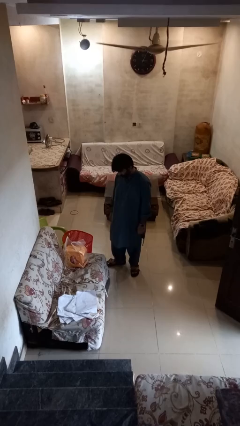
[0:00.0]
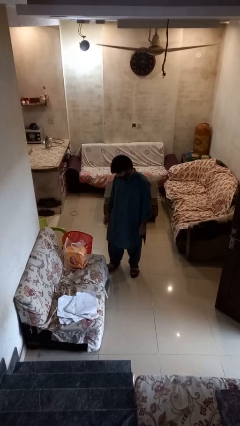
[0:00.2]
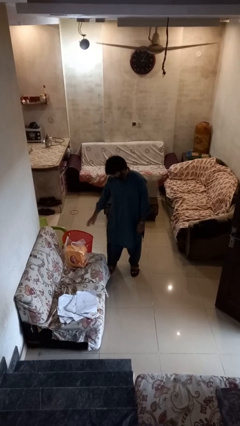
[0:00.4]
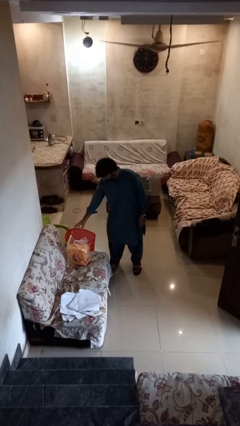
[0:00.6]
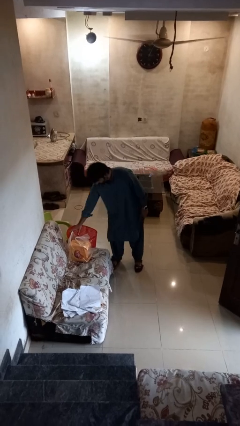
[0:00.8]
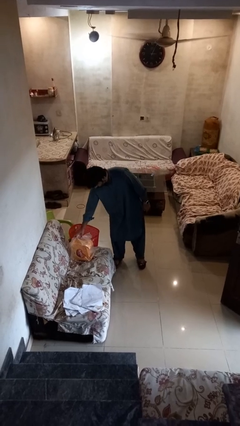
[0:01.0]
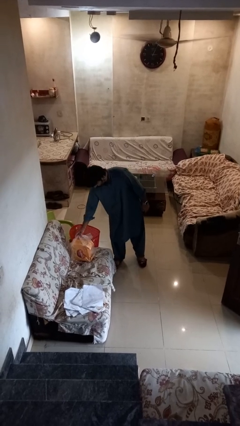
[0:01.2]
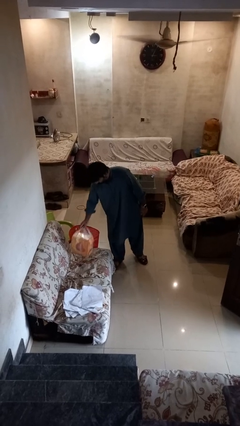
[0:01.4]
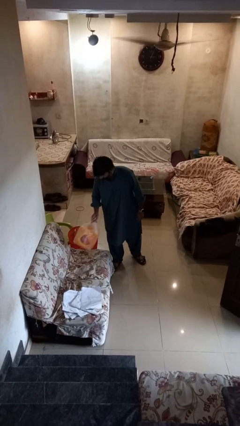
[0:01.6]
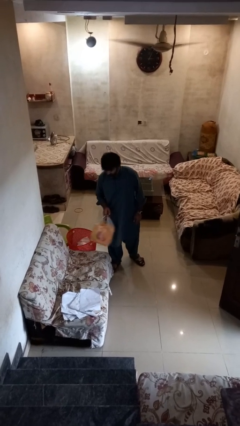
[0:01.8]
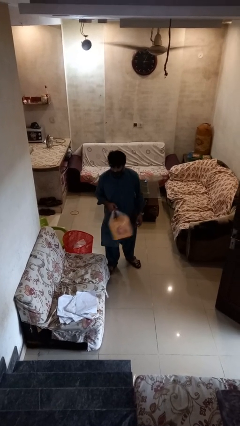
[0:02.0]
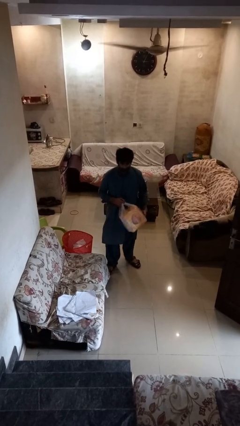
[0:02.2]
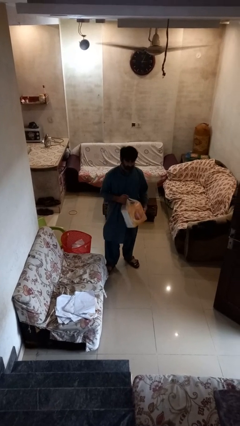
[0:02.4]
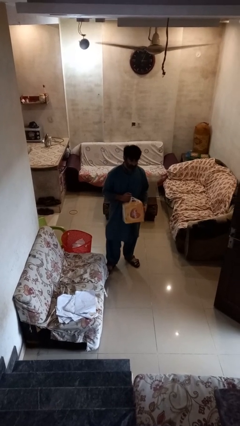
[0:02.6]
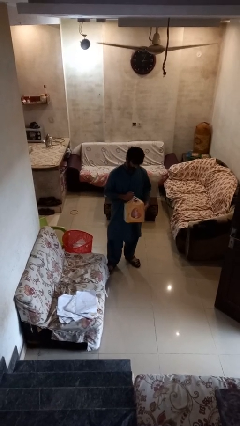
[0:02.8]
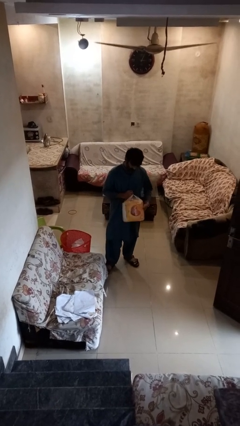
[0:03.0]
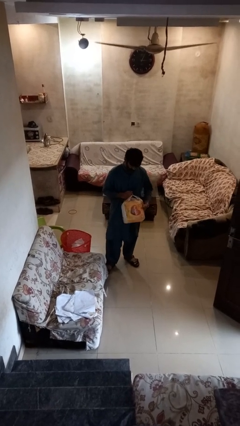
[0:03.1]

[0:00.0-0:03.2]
person picks up object from couch

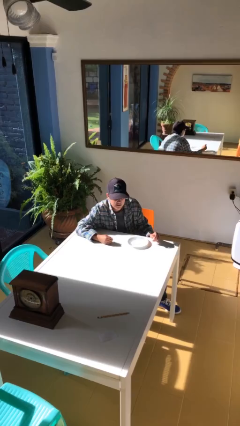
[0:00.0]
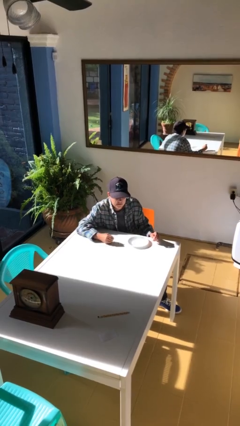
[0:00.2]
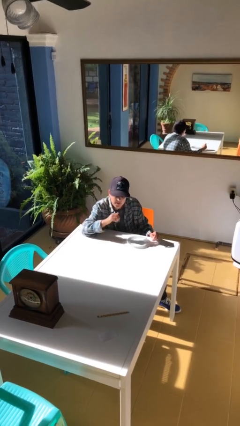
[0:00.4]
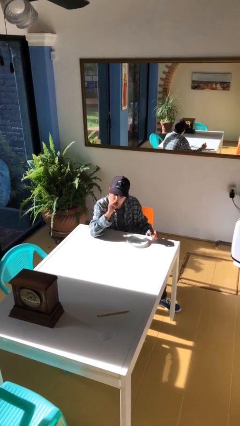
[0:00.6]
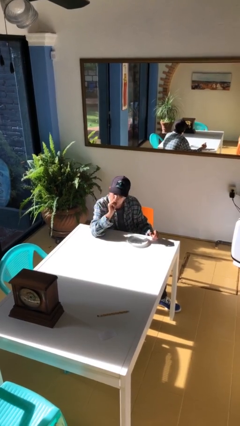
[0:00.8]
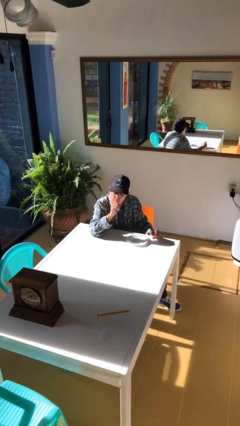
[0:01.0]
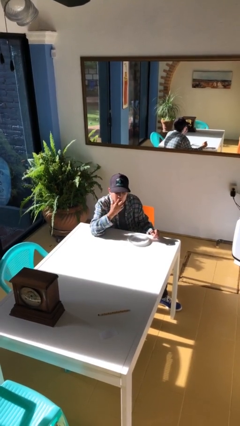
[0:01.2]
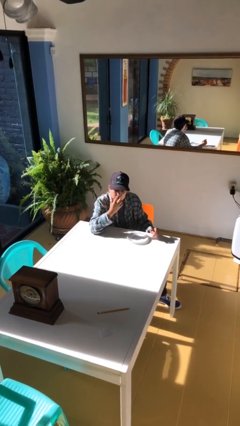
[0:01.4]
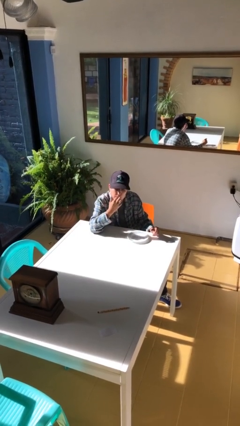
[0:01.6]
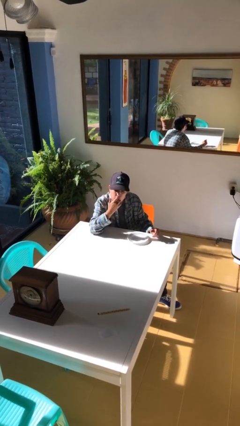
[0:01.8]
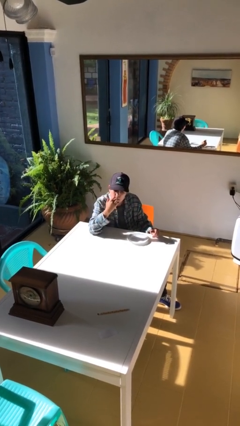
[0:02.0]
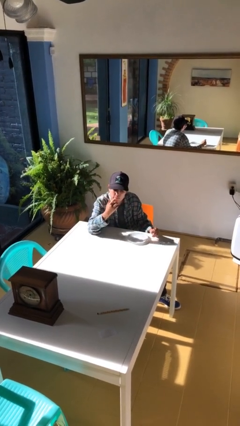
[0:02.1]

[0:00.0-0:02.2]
person licks fingers

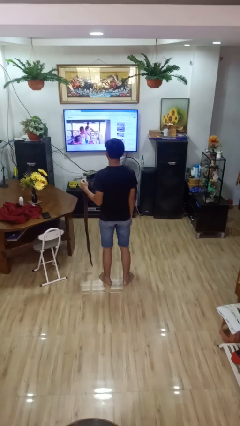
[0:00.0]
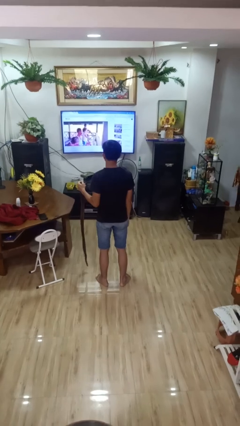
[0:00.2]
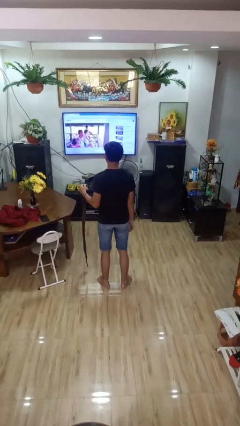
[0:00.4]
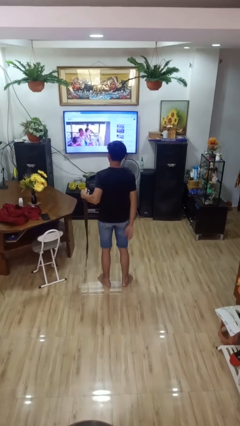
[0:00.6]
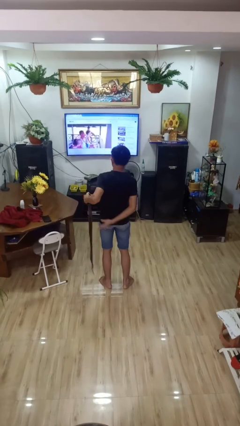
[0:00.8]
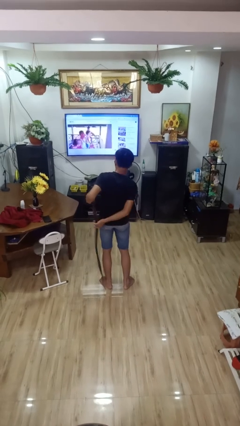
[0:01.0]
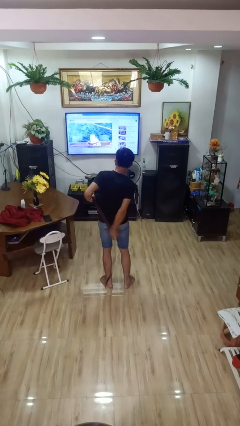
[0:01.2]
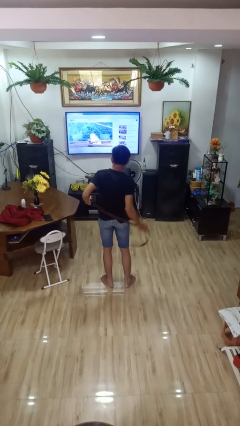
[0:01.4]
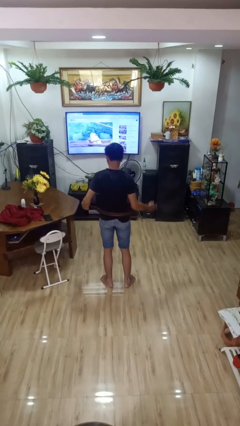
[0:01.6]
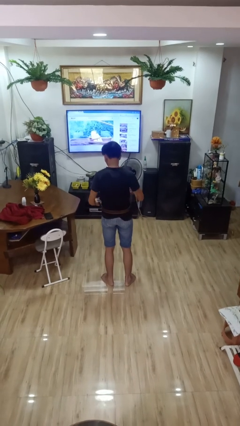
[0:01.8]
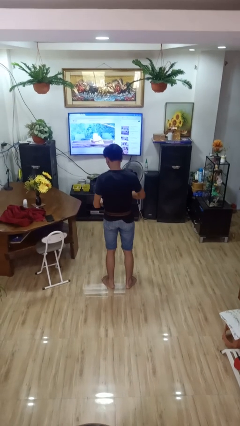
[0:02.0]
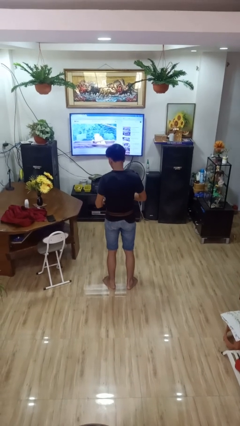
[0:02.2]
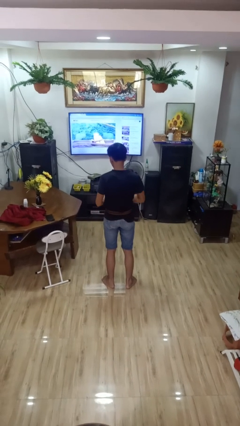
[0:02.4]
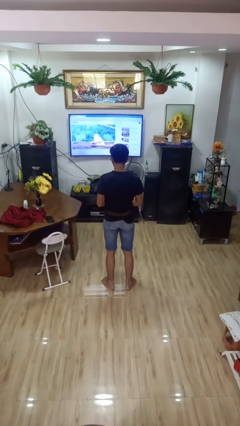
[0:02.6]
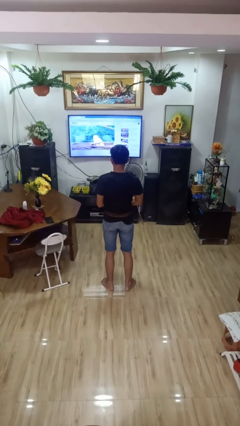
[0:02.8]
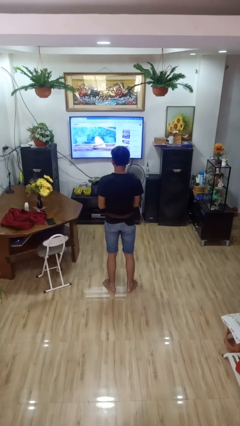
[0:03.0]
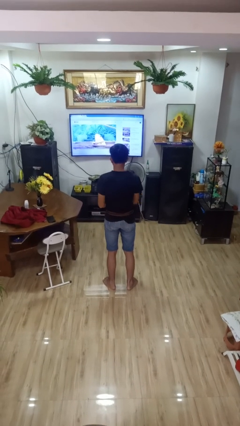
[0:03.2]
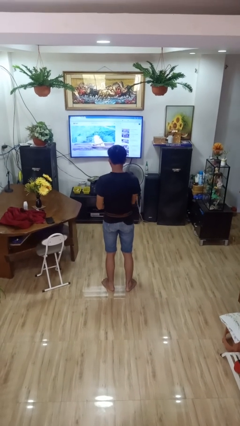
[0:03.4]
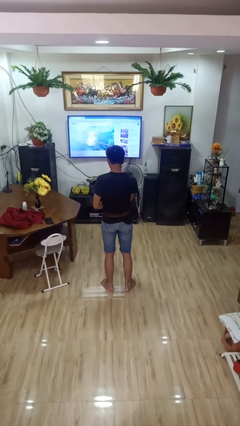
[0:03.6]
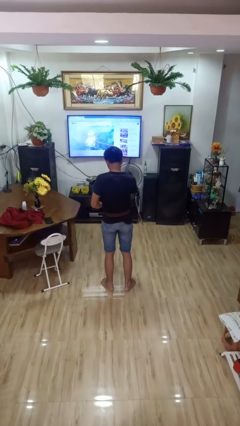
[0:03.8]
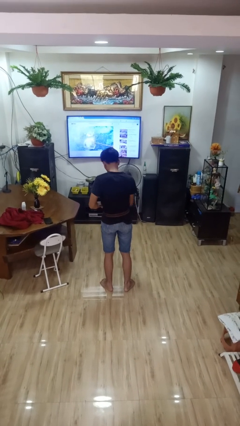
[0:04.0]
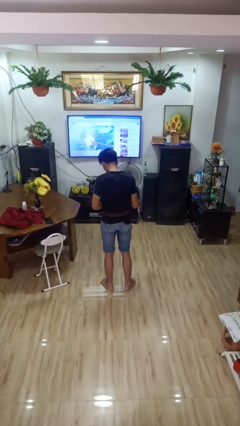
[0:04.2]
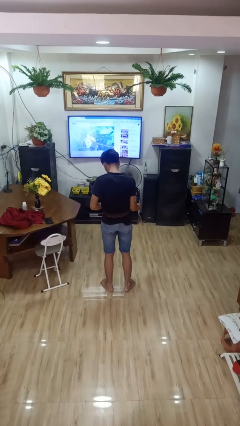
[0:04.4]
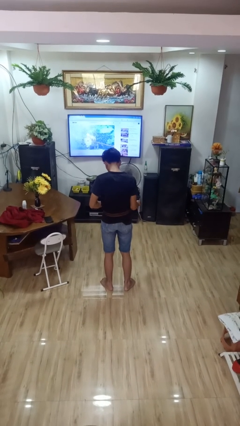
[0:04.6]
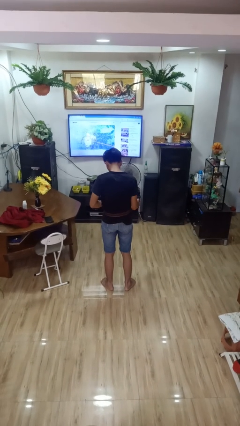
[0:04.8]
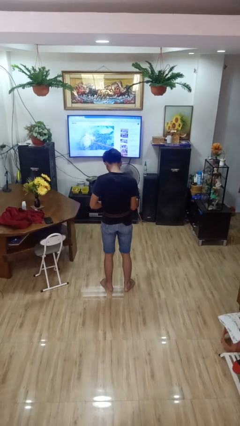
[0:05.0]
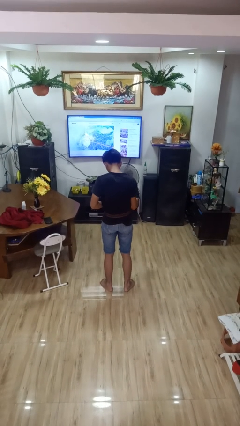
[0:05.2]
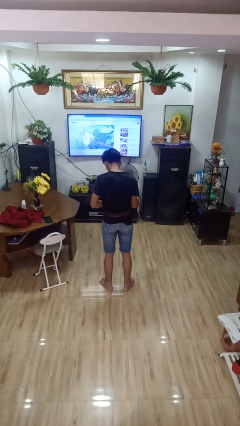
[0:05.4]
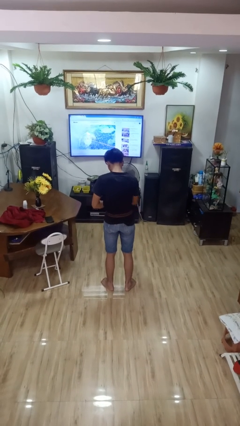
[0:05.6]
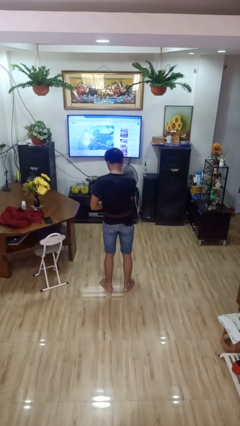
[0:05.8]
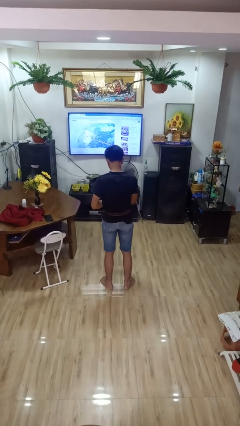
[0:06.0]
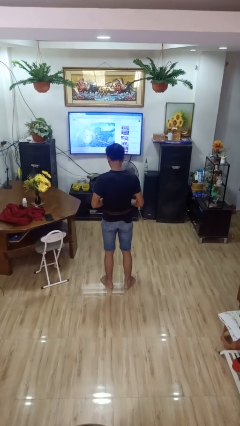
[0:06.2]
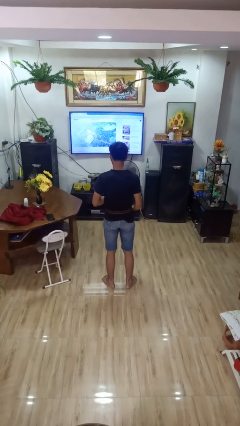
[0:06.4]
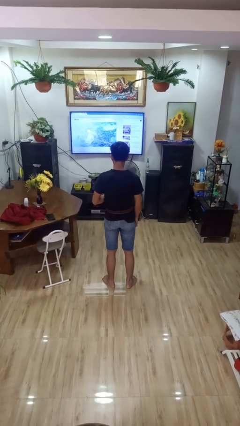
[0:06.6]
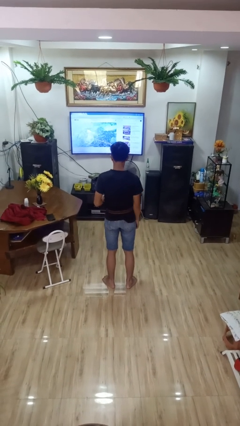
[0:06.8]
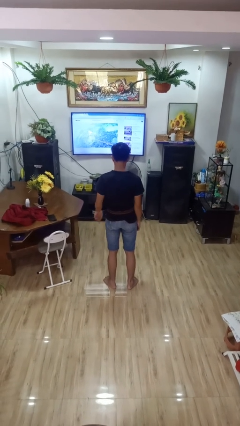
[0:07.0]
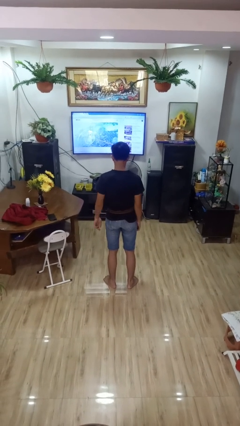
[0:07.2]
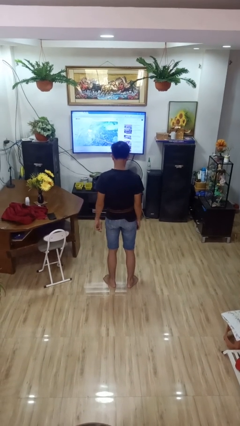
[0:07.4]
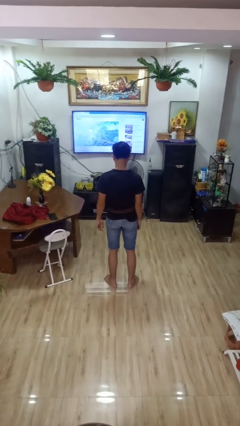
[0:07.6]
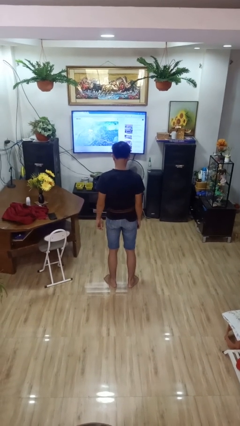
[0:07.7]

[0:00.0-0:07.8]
person puts on belt

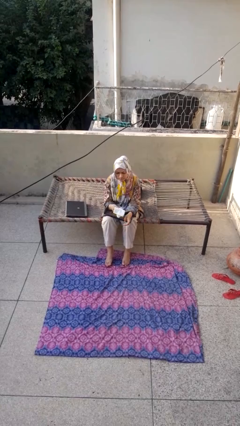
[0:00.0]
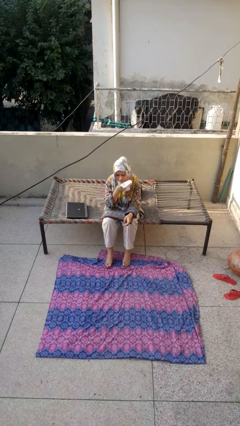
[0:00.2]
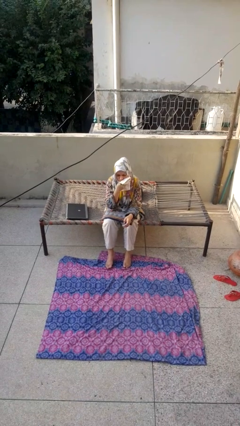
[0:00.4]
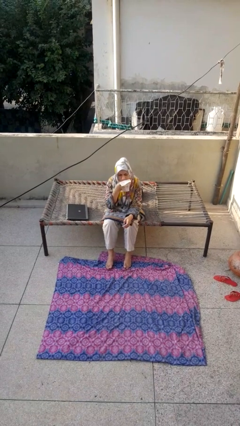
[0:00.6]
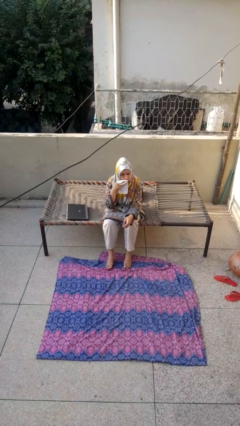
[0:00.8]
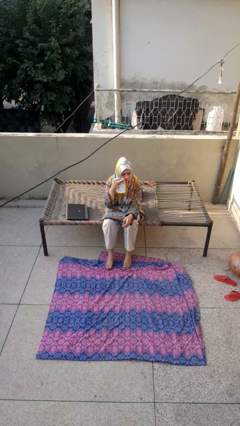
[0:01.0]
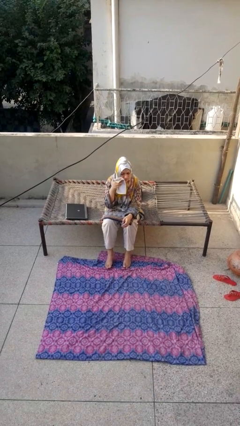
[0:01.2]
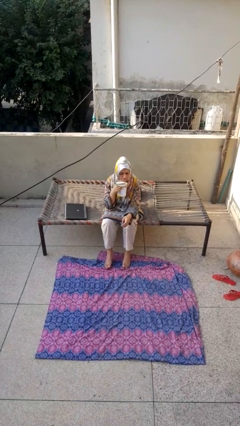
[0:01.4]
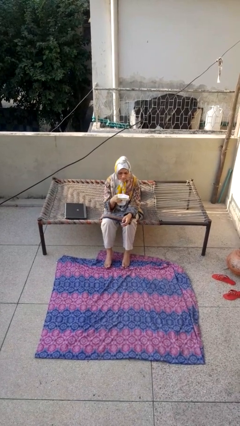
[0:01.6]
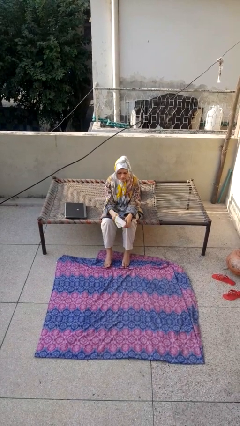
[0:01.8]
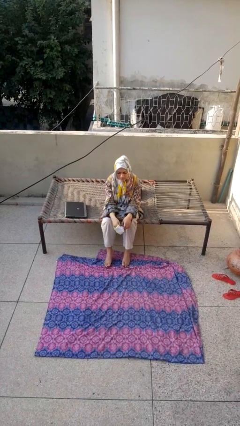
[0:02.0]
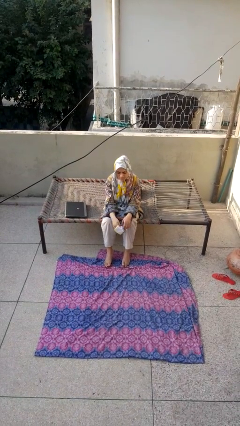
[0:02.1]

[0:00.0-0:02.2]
person wipes mouth with napkin

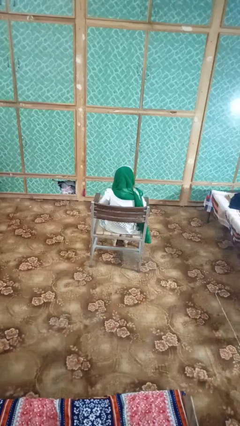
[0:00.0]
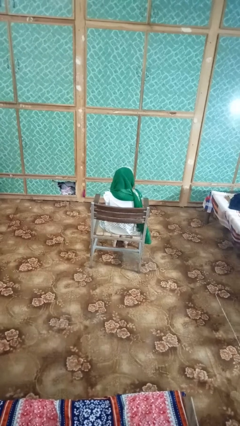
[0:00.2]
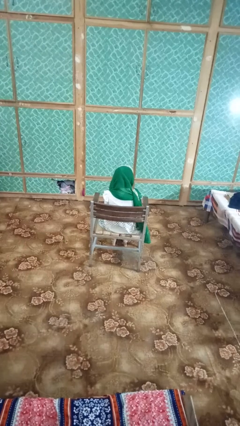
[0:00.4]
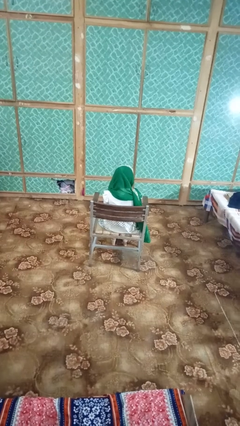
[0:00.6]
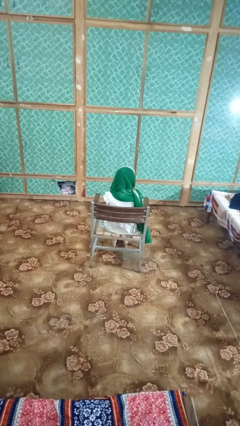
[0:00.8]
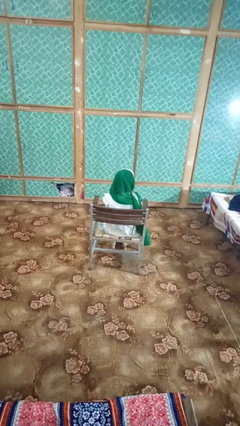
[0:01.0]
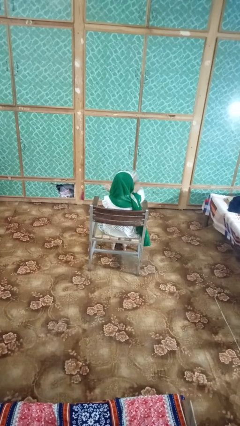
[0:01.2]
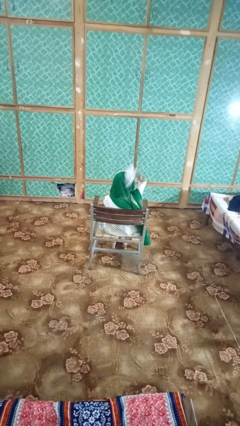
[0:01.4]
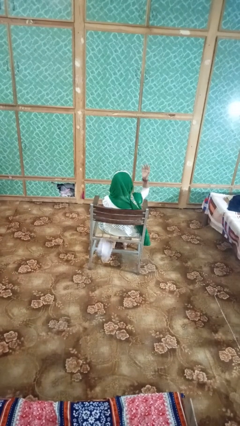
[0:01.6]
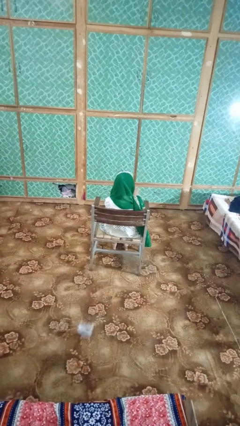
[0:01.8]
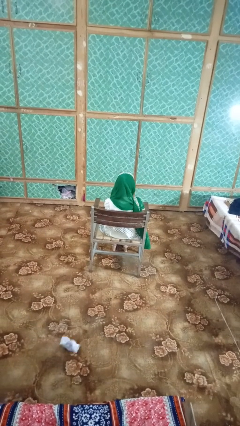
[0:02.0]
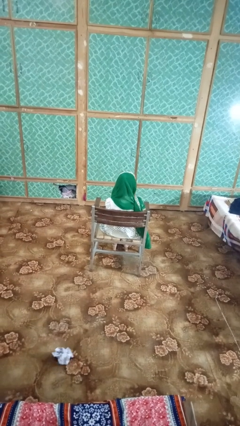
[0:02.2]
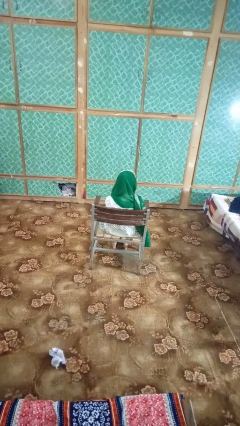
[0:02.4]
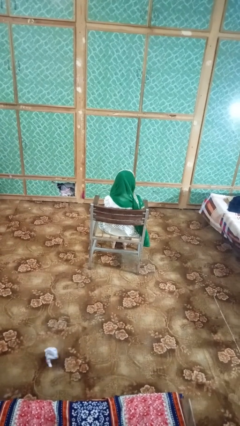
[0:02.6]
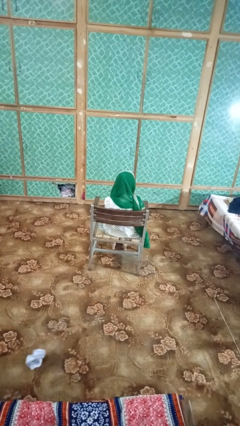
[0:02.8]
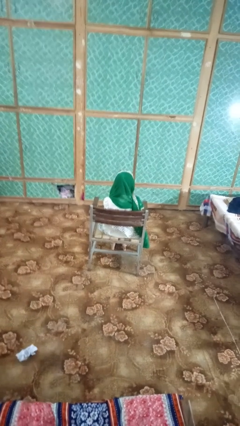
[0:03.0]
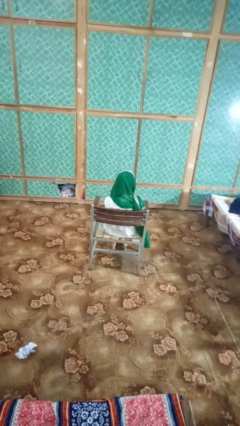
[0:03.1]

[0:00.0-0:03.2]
person crumples paper
